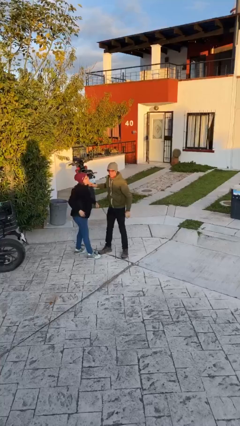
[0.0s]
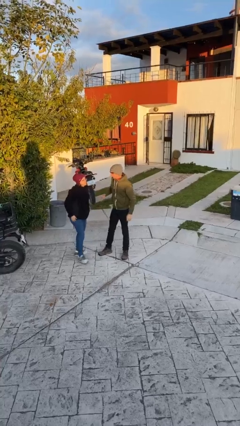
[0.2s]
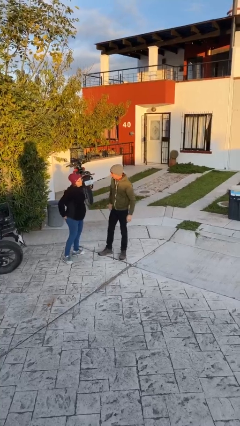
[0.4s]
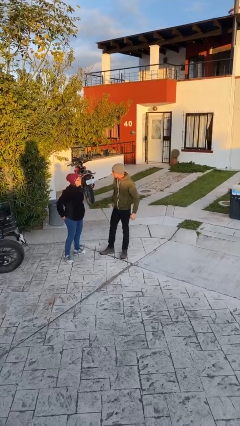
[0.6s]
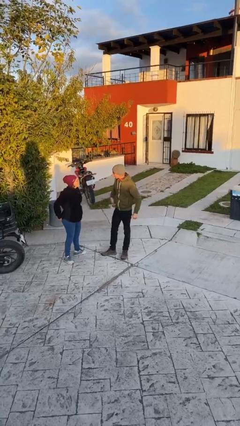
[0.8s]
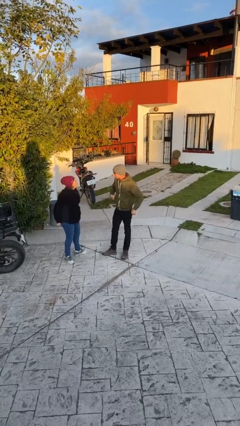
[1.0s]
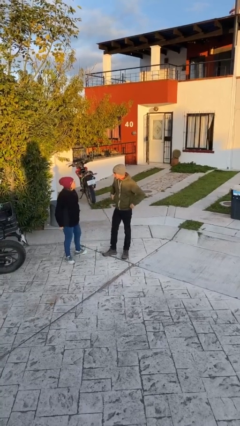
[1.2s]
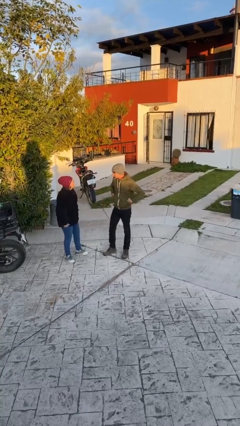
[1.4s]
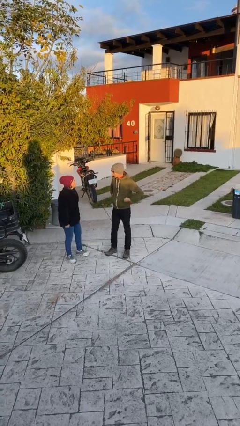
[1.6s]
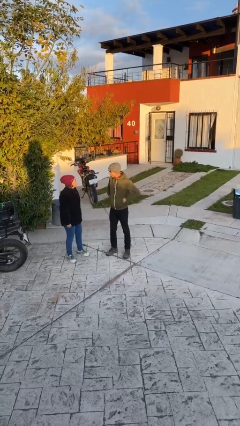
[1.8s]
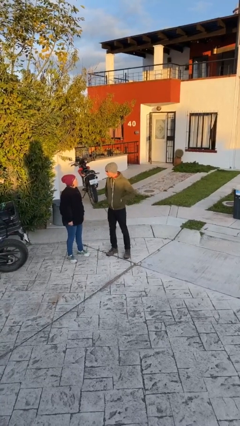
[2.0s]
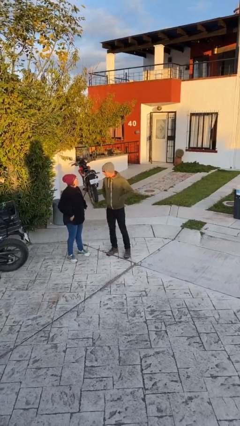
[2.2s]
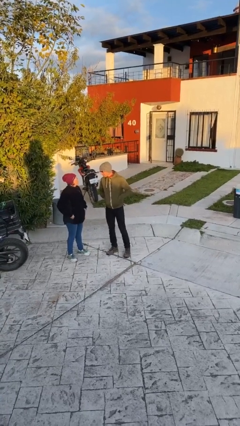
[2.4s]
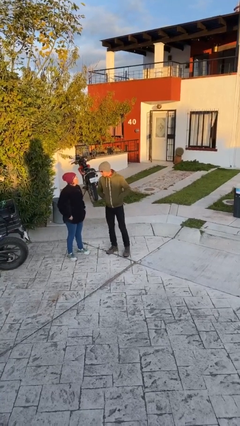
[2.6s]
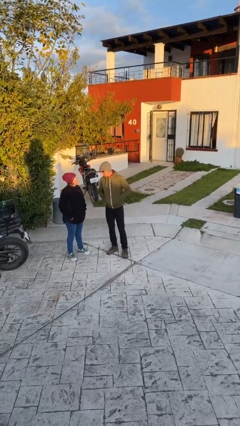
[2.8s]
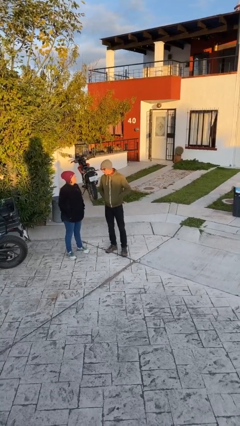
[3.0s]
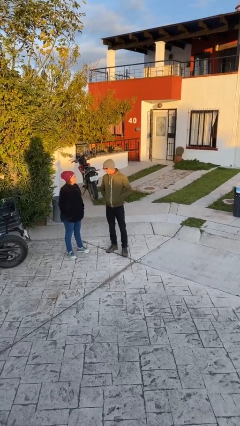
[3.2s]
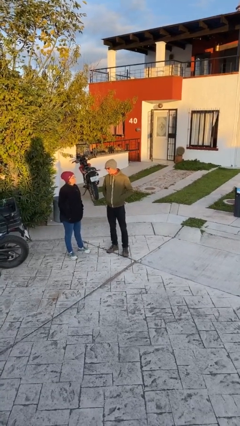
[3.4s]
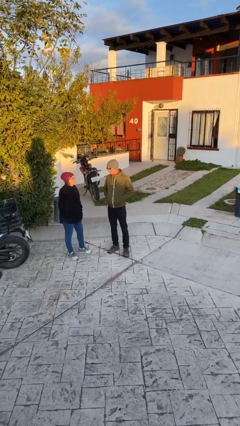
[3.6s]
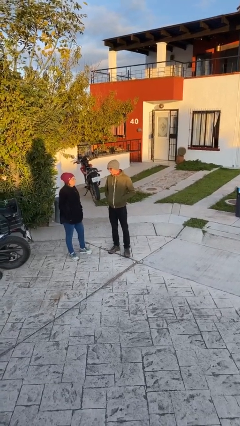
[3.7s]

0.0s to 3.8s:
person talks to person

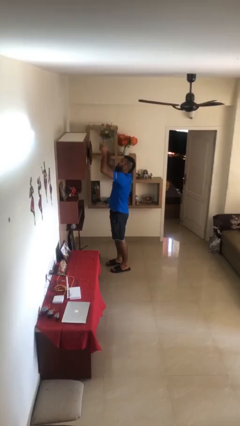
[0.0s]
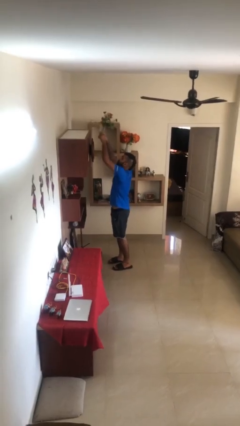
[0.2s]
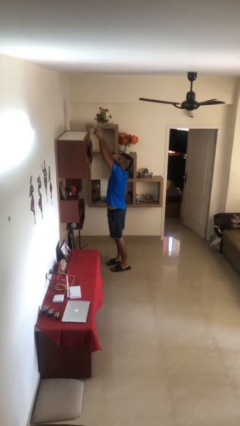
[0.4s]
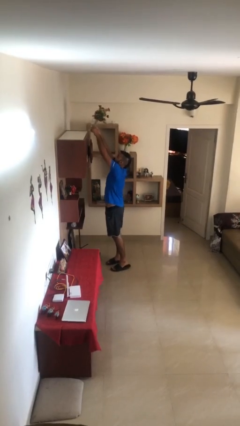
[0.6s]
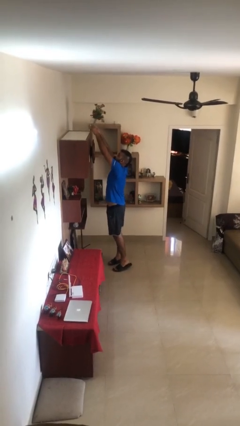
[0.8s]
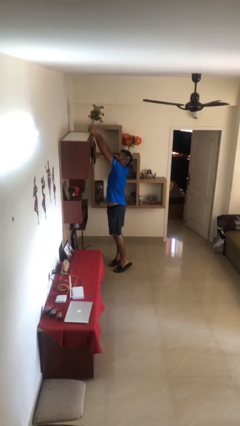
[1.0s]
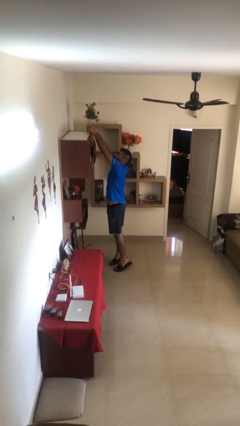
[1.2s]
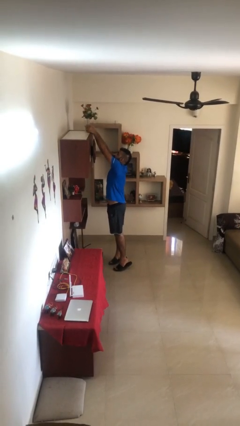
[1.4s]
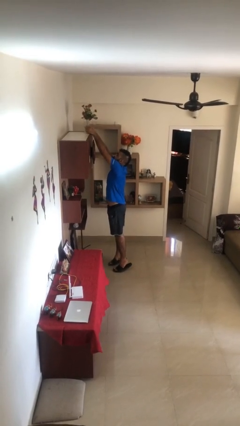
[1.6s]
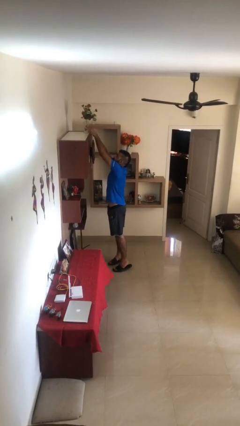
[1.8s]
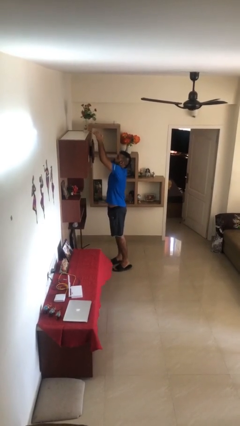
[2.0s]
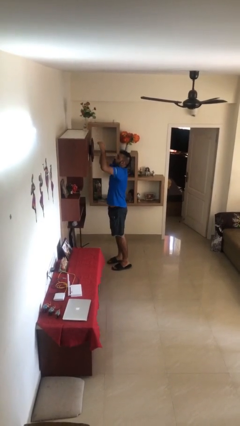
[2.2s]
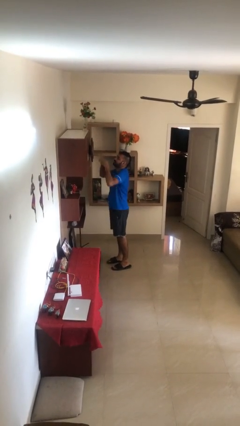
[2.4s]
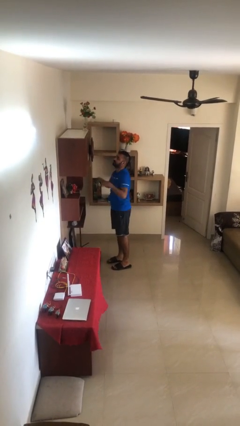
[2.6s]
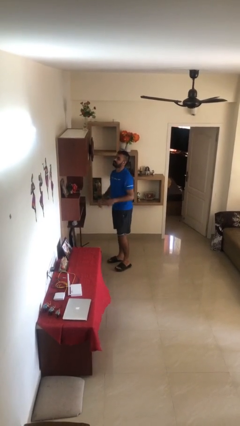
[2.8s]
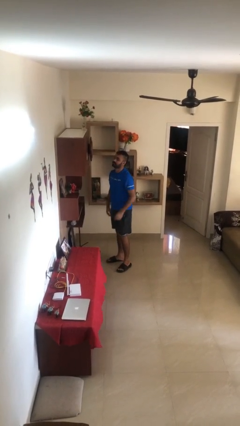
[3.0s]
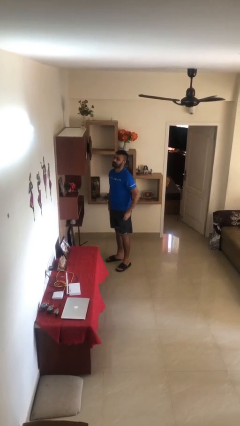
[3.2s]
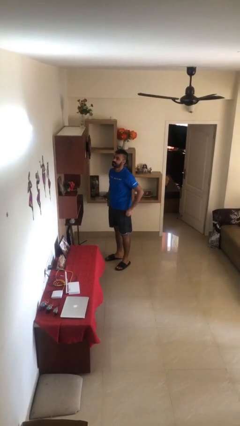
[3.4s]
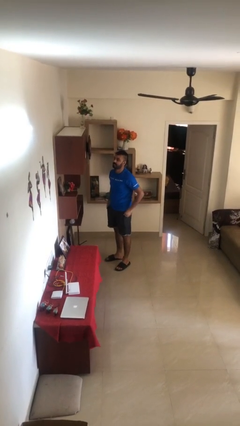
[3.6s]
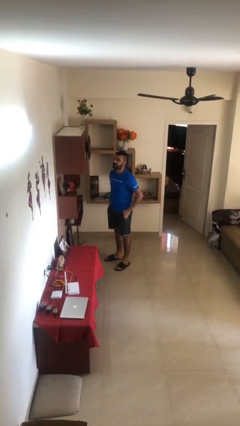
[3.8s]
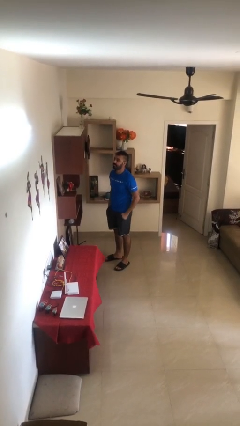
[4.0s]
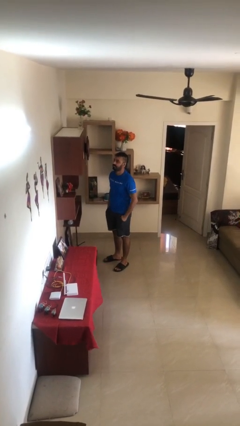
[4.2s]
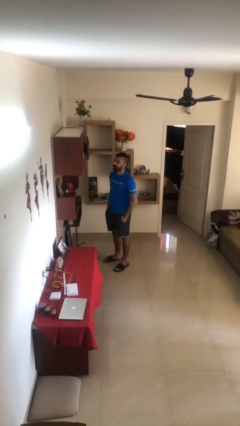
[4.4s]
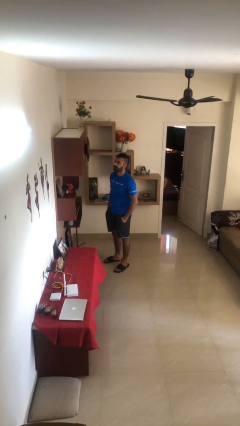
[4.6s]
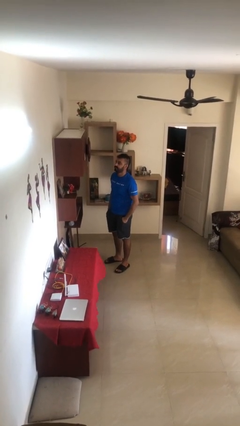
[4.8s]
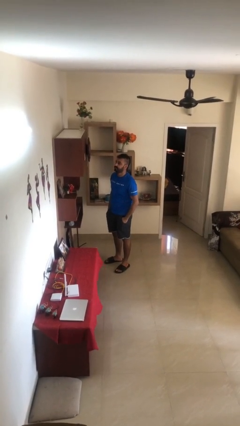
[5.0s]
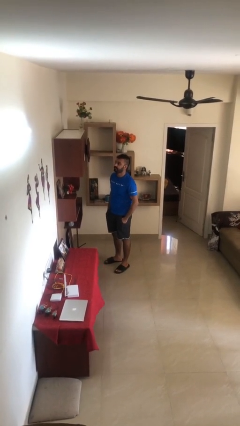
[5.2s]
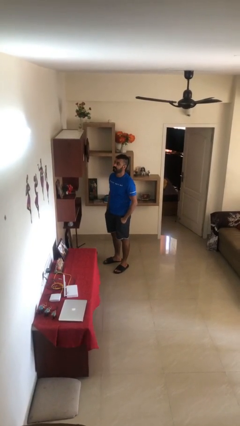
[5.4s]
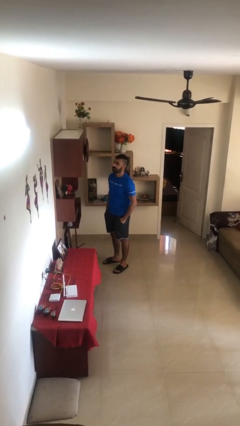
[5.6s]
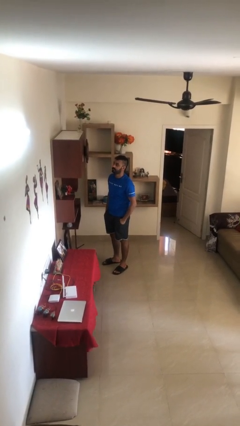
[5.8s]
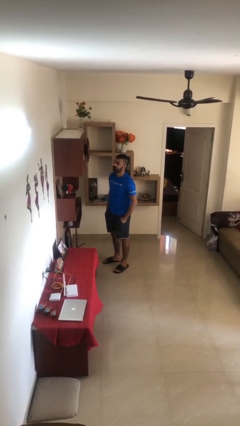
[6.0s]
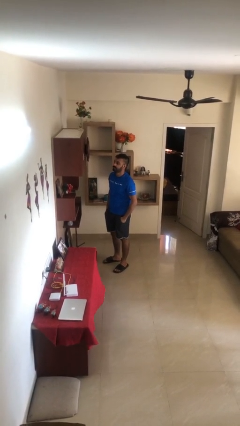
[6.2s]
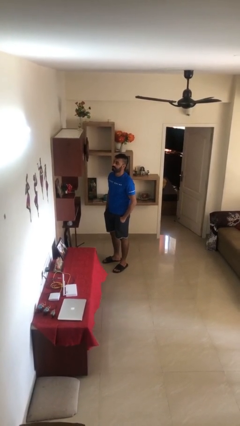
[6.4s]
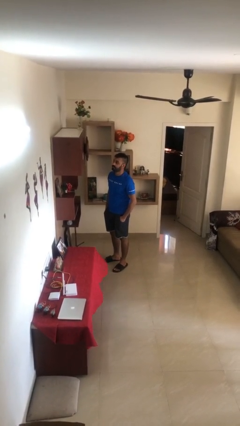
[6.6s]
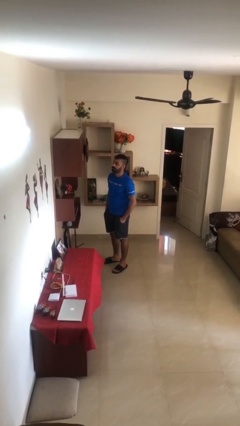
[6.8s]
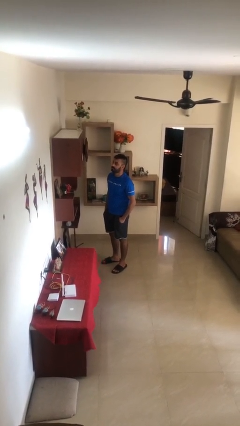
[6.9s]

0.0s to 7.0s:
person puts down object on shelf

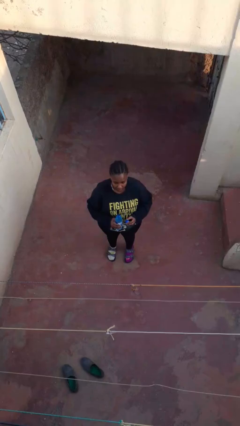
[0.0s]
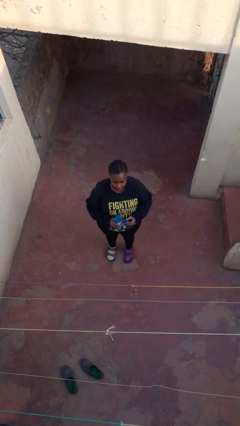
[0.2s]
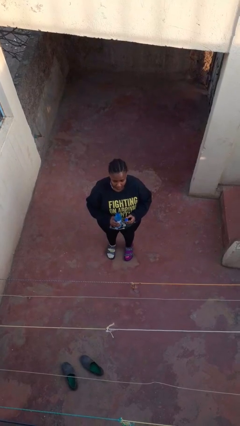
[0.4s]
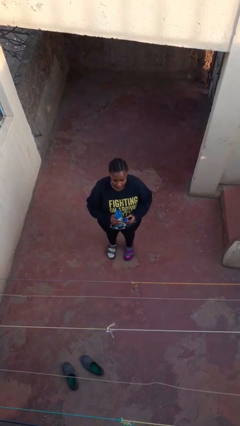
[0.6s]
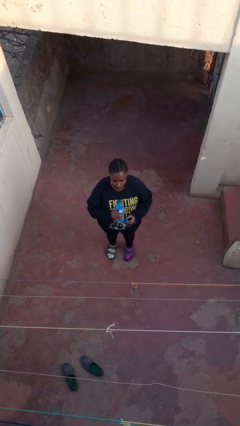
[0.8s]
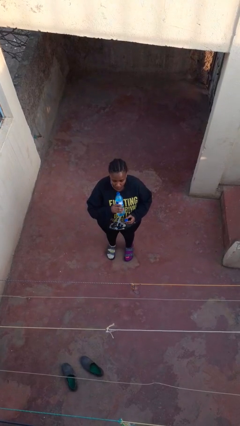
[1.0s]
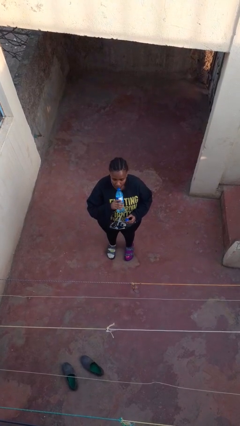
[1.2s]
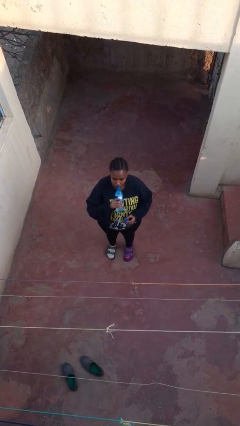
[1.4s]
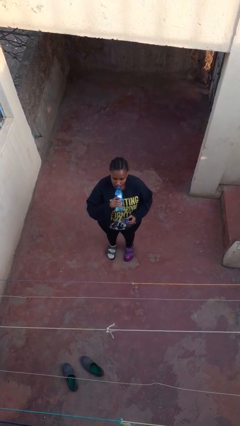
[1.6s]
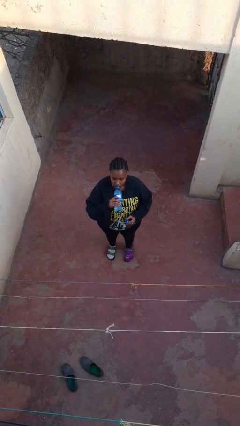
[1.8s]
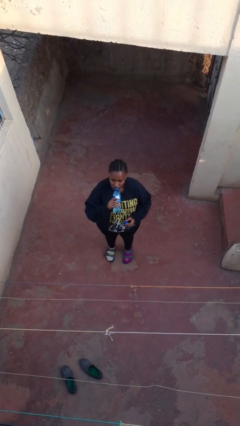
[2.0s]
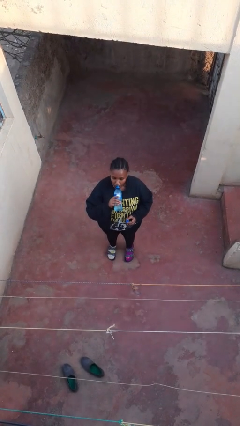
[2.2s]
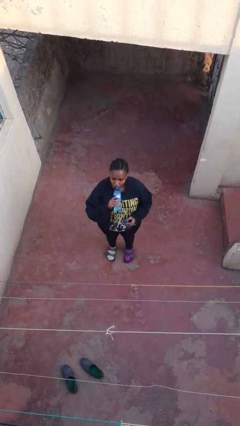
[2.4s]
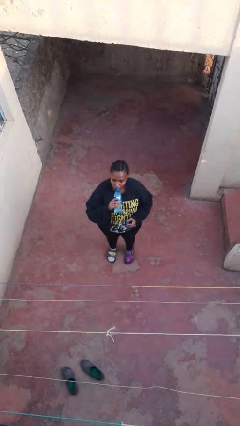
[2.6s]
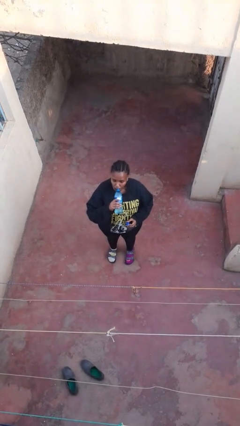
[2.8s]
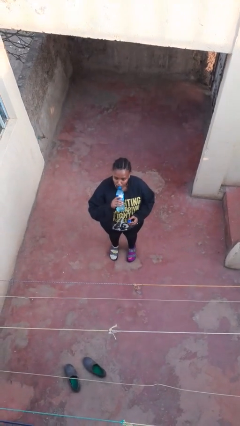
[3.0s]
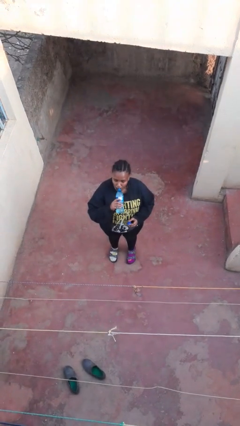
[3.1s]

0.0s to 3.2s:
person drinks from bottle

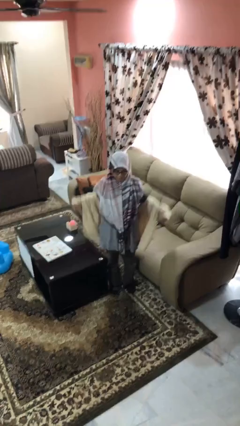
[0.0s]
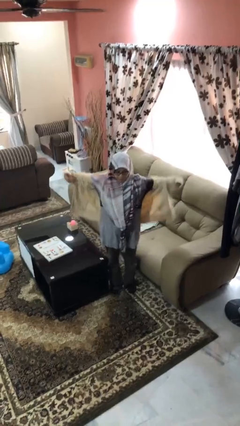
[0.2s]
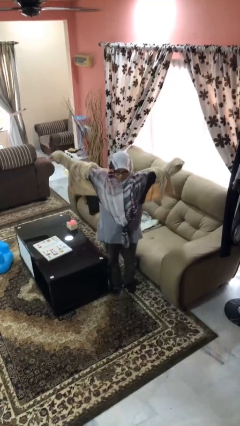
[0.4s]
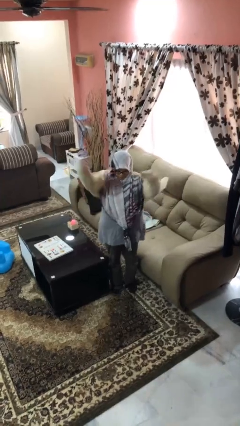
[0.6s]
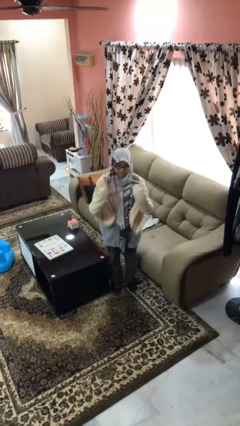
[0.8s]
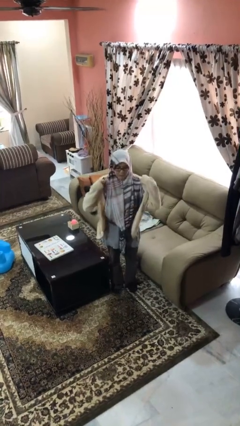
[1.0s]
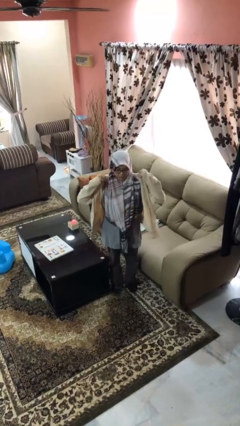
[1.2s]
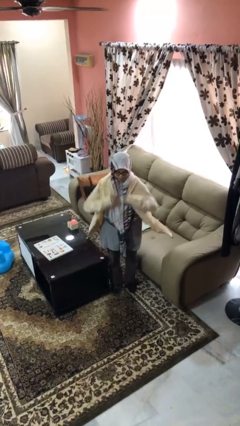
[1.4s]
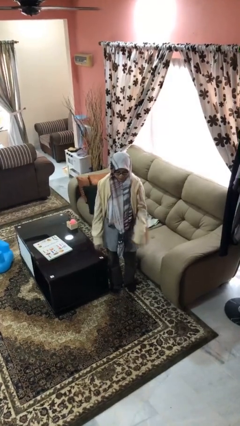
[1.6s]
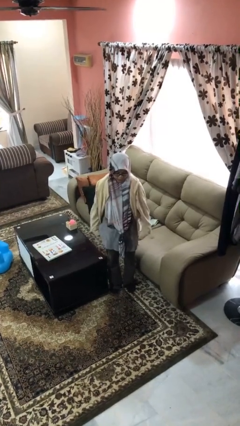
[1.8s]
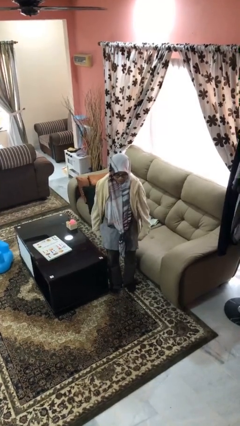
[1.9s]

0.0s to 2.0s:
person puts on jacket

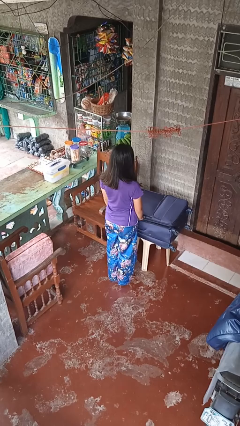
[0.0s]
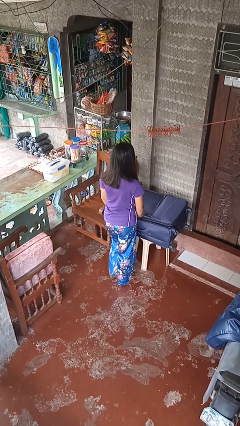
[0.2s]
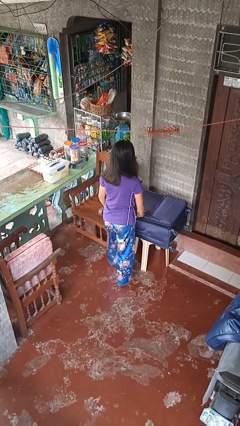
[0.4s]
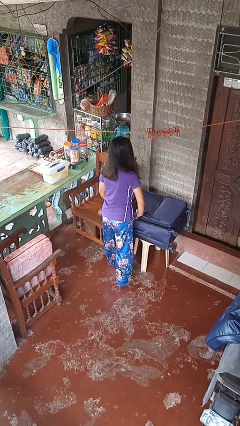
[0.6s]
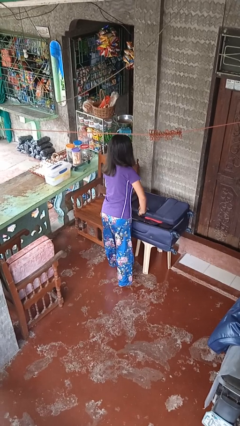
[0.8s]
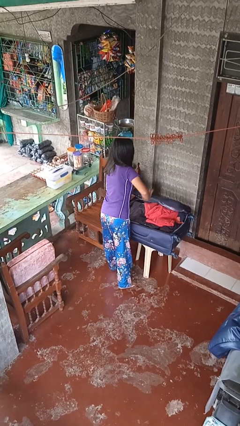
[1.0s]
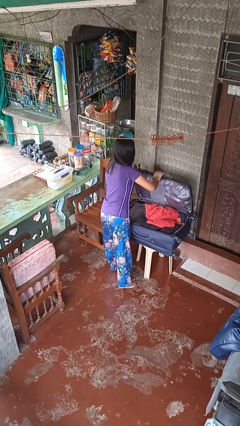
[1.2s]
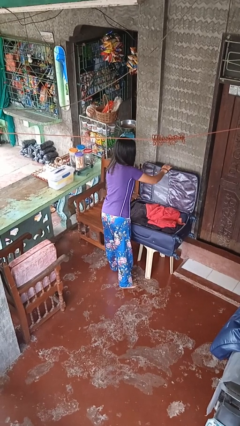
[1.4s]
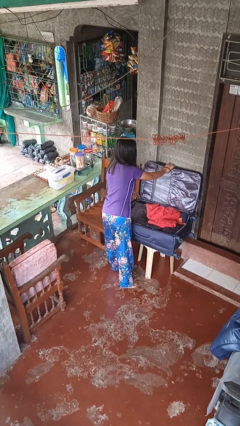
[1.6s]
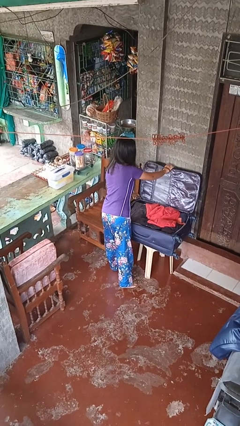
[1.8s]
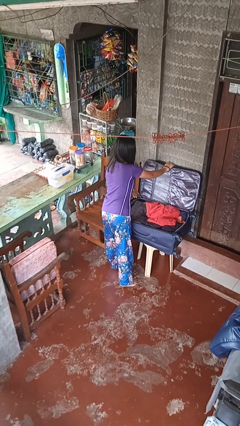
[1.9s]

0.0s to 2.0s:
person opens suitcase
